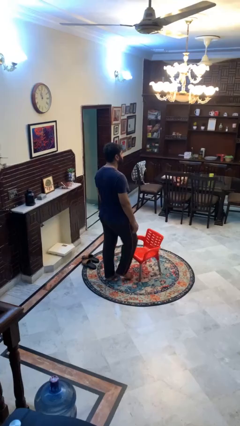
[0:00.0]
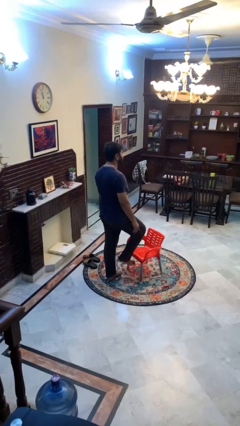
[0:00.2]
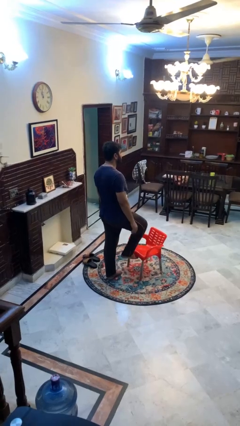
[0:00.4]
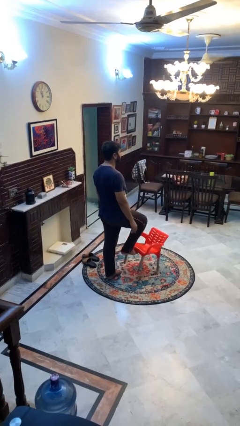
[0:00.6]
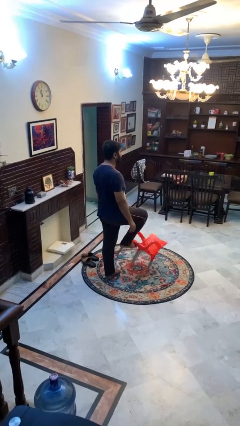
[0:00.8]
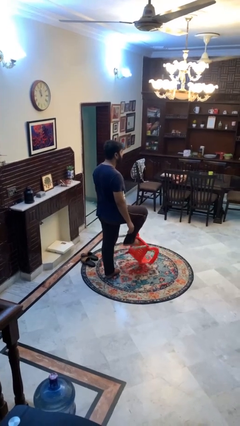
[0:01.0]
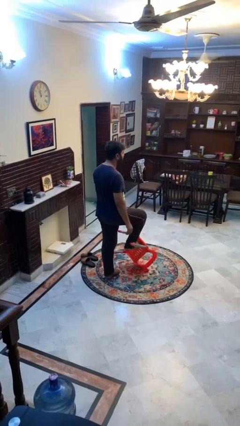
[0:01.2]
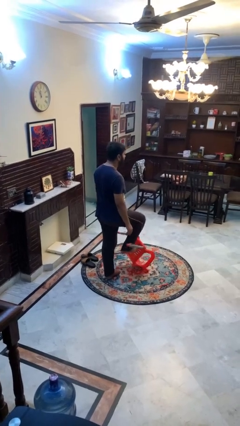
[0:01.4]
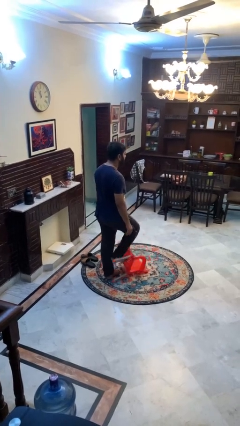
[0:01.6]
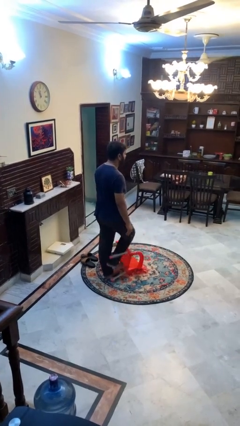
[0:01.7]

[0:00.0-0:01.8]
person knocks over furniture

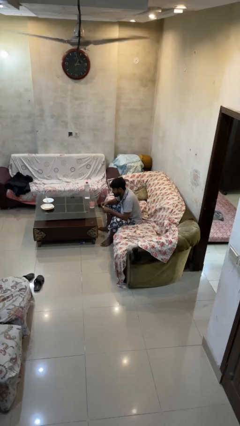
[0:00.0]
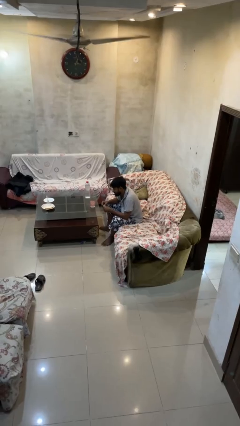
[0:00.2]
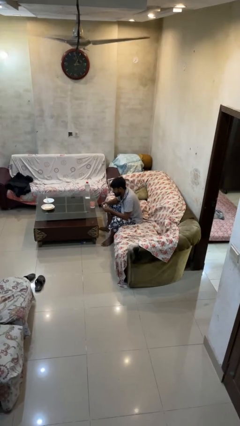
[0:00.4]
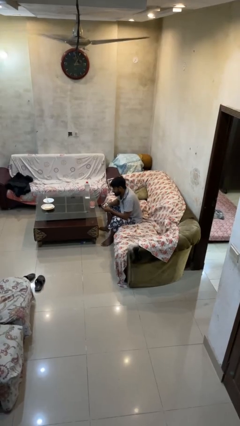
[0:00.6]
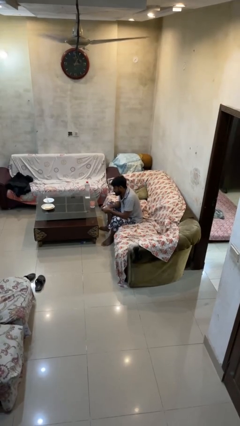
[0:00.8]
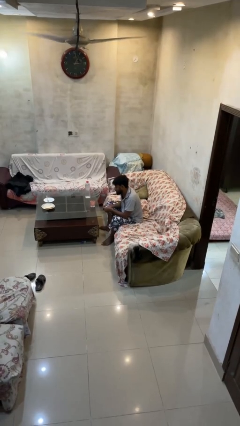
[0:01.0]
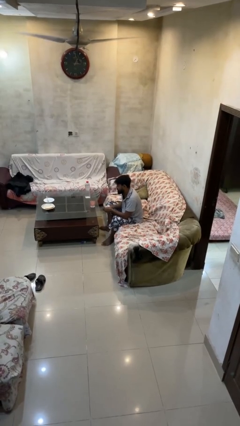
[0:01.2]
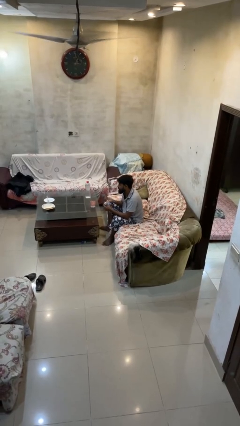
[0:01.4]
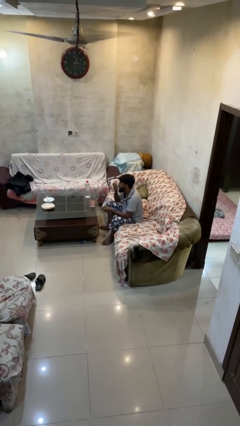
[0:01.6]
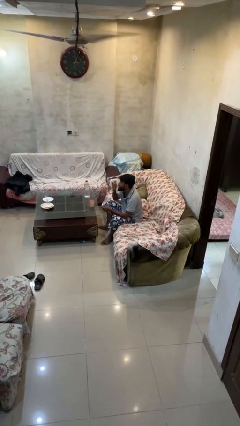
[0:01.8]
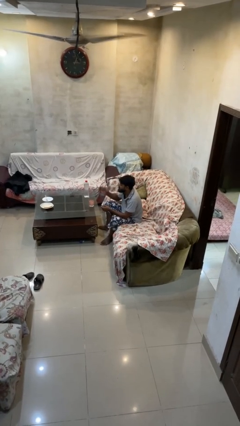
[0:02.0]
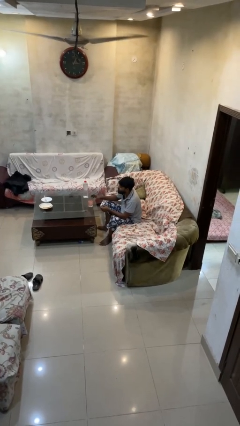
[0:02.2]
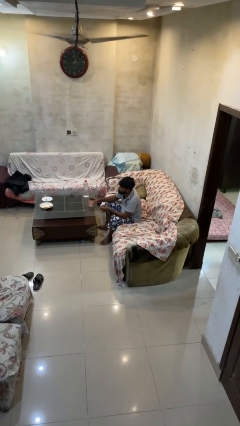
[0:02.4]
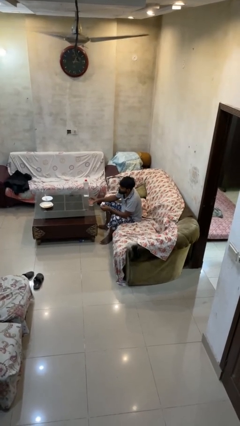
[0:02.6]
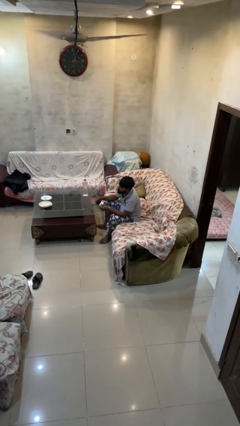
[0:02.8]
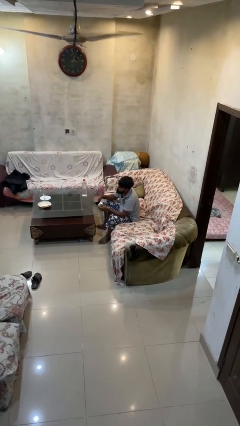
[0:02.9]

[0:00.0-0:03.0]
person takes medicine pills

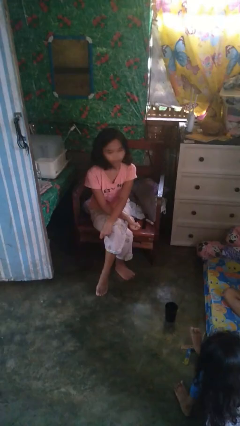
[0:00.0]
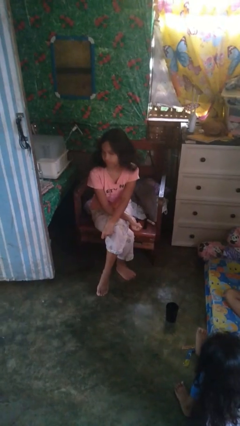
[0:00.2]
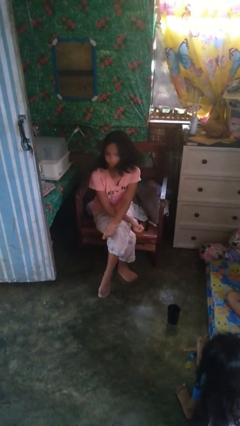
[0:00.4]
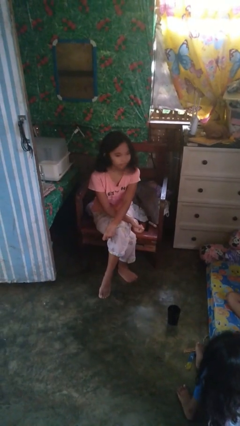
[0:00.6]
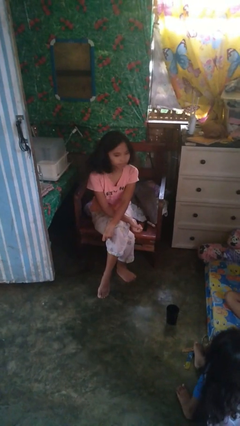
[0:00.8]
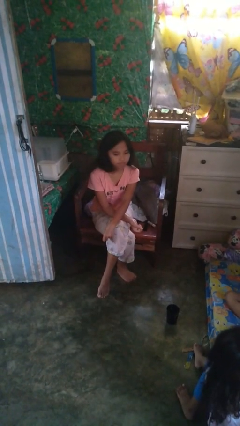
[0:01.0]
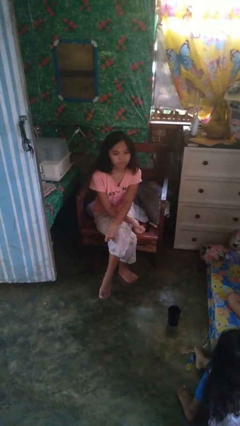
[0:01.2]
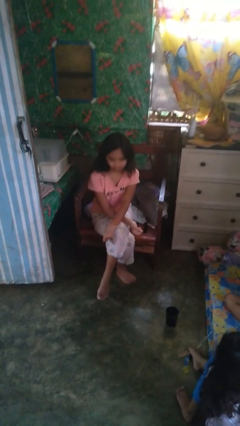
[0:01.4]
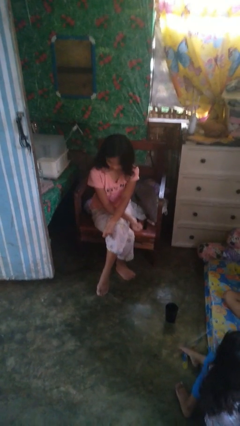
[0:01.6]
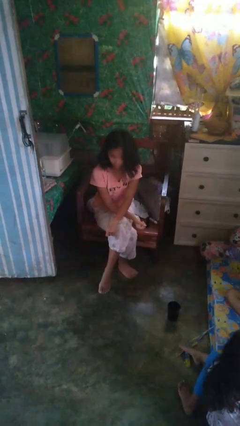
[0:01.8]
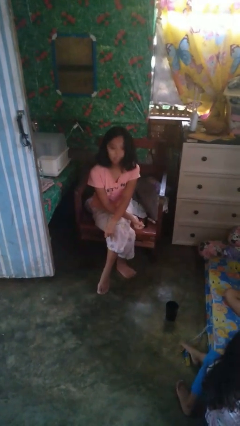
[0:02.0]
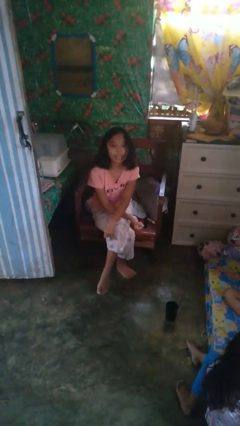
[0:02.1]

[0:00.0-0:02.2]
person shakes head

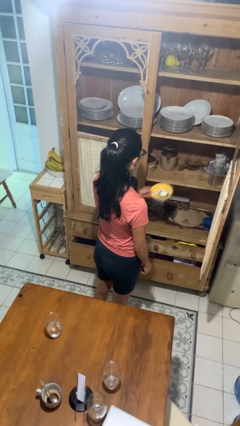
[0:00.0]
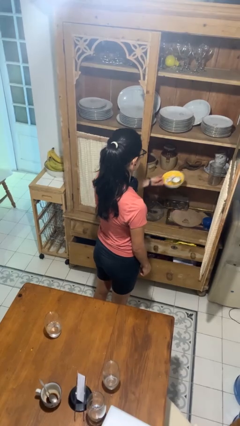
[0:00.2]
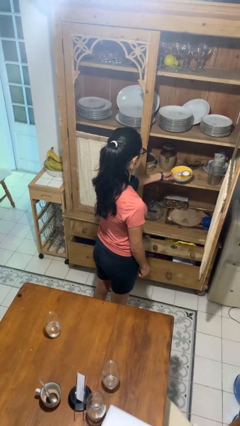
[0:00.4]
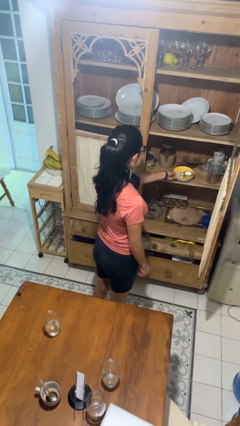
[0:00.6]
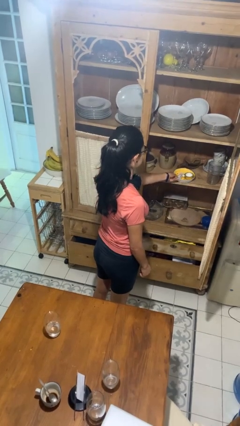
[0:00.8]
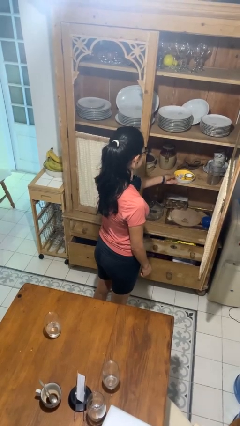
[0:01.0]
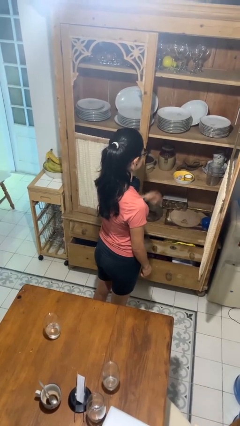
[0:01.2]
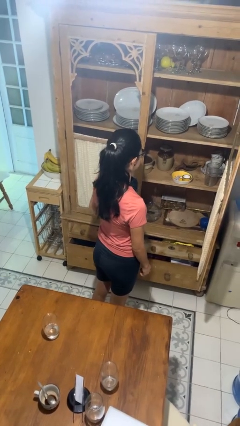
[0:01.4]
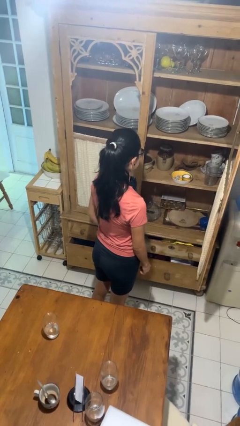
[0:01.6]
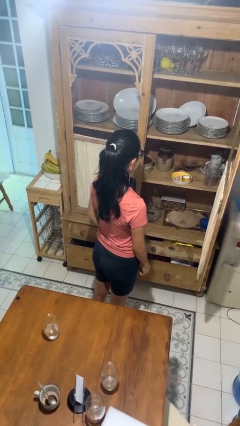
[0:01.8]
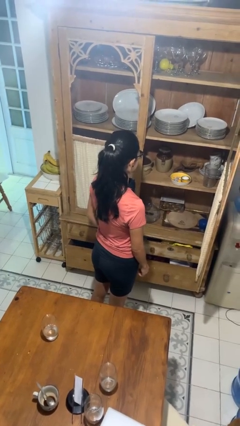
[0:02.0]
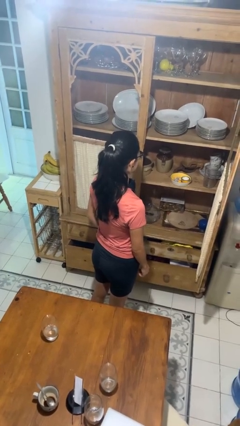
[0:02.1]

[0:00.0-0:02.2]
person puts object in cabinet

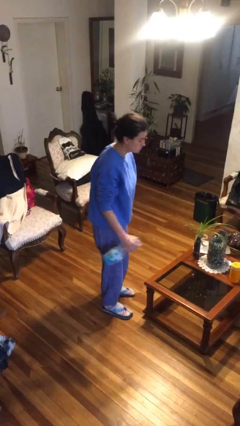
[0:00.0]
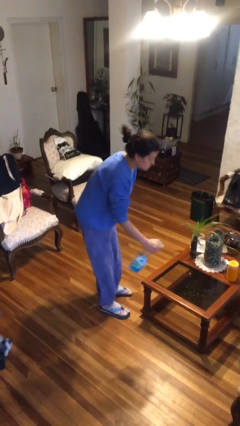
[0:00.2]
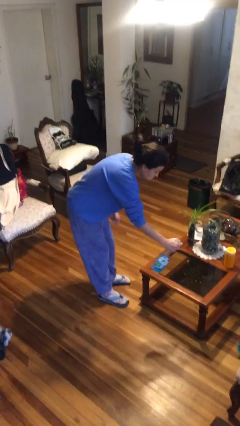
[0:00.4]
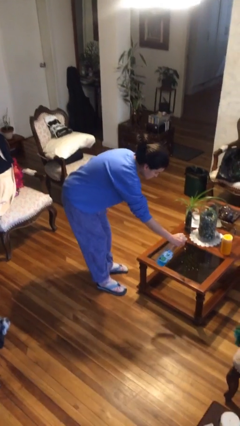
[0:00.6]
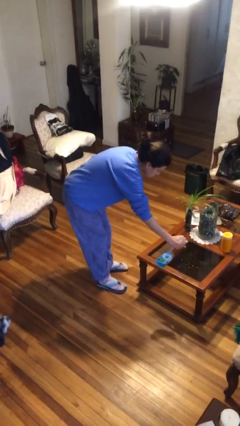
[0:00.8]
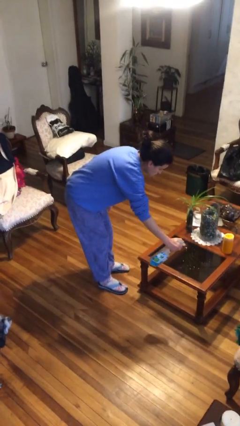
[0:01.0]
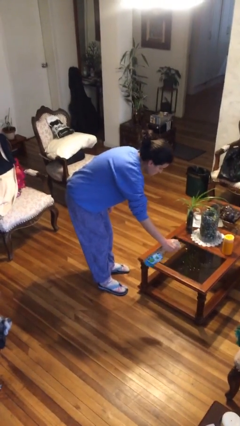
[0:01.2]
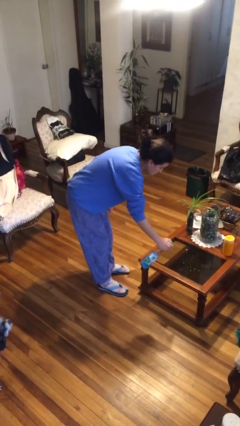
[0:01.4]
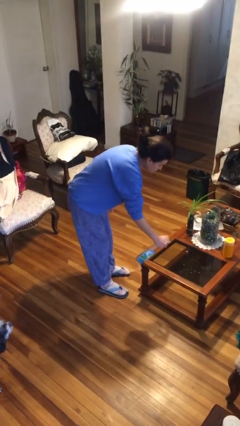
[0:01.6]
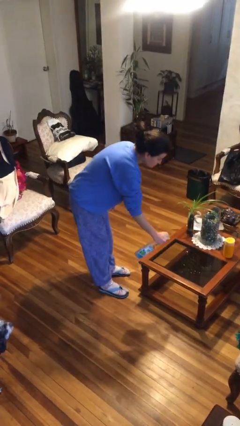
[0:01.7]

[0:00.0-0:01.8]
person sprays from bottle

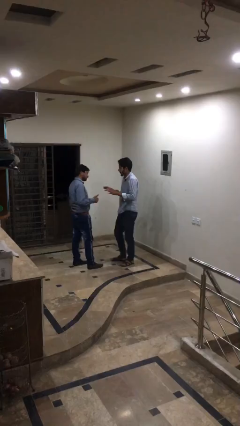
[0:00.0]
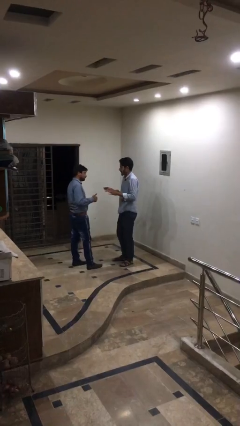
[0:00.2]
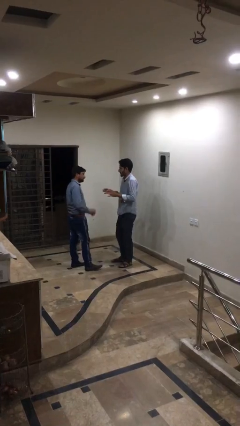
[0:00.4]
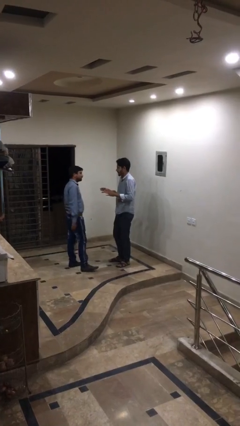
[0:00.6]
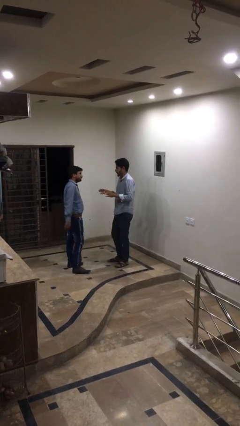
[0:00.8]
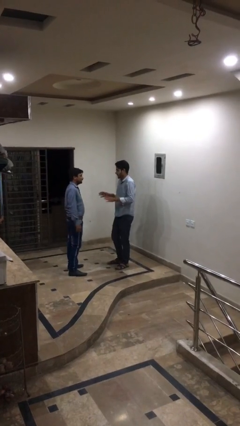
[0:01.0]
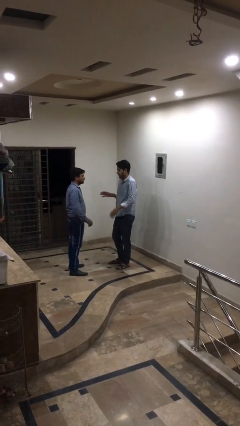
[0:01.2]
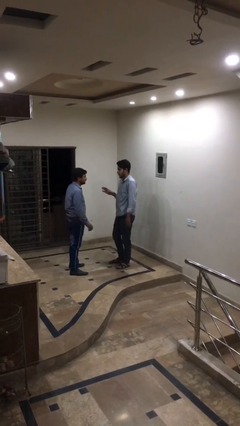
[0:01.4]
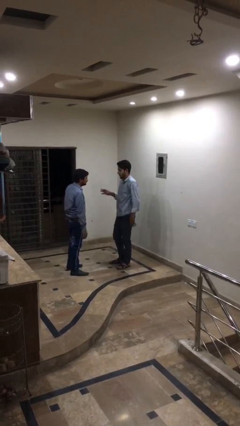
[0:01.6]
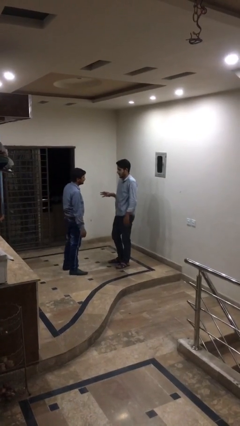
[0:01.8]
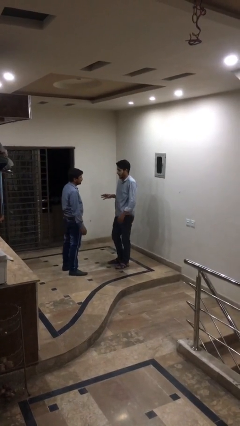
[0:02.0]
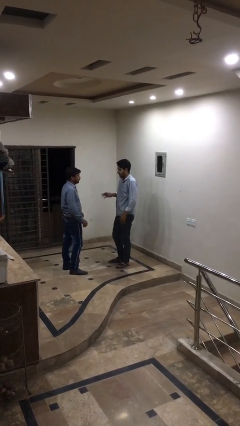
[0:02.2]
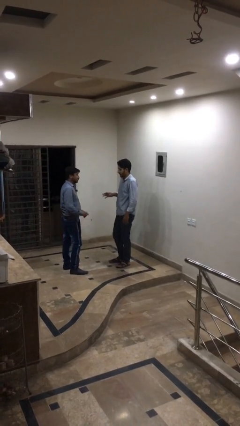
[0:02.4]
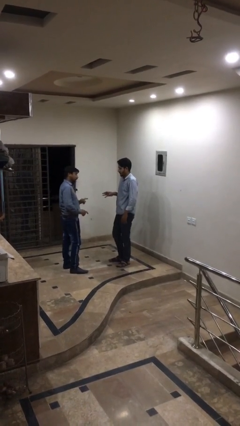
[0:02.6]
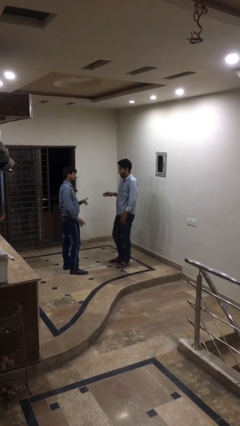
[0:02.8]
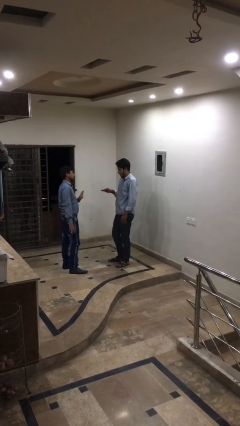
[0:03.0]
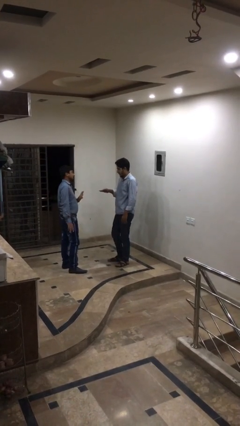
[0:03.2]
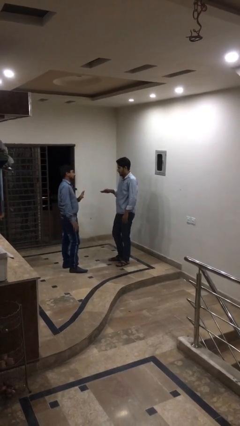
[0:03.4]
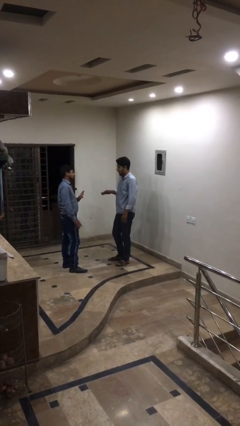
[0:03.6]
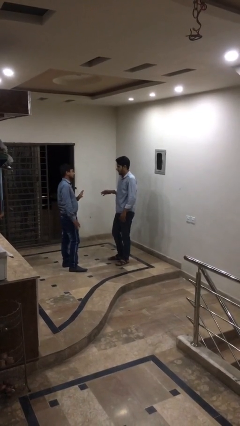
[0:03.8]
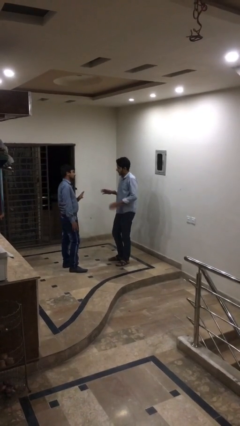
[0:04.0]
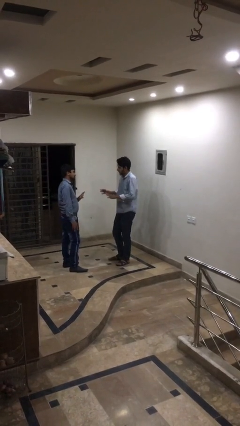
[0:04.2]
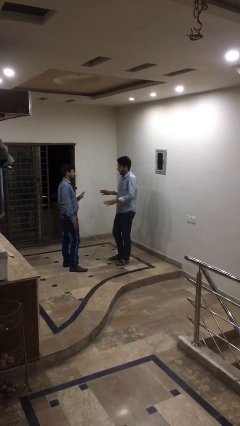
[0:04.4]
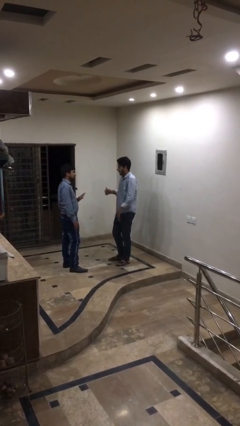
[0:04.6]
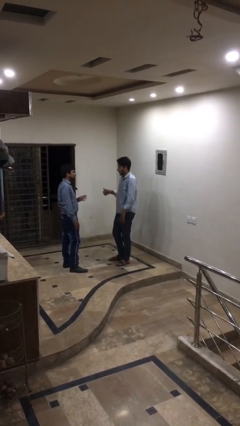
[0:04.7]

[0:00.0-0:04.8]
person talks to person

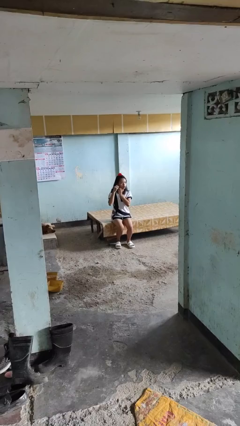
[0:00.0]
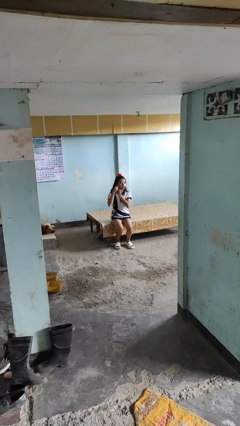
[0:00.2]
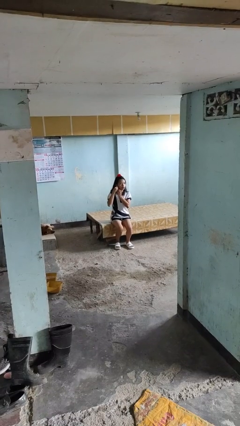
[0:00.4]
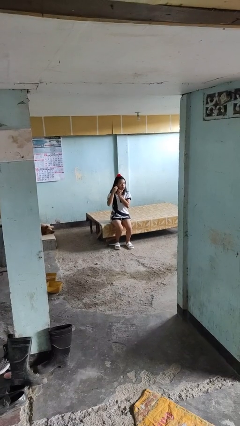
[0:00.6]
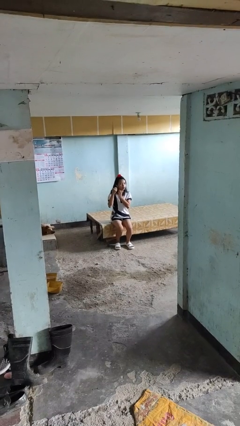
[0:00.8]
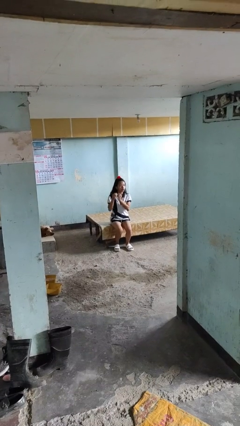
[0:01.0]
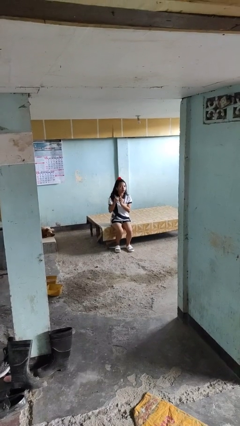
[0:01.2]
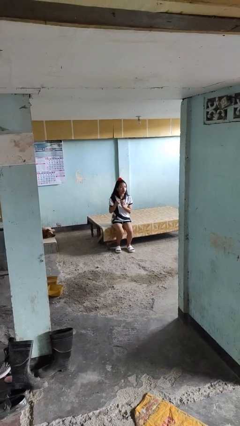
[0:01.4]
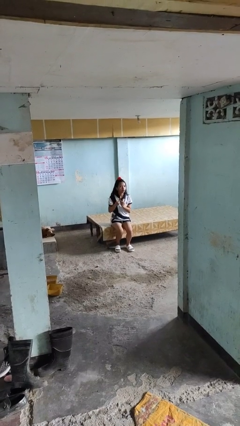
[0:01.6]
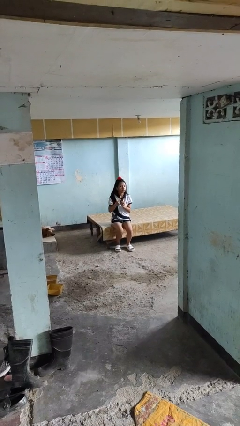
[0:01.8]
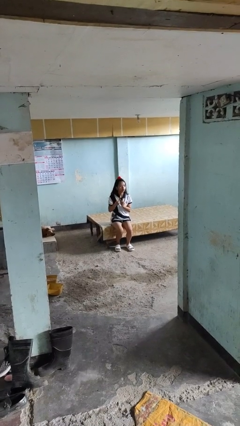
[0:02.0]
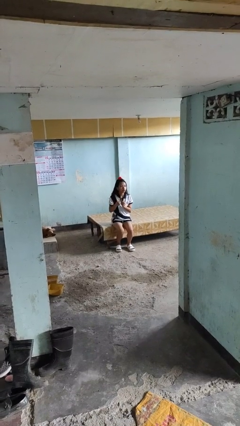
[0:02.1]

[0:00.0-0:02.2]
person takes off earrings
